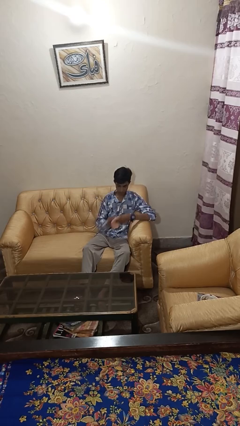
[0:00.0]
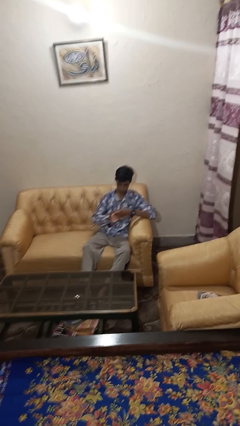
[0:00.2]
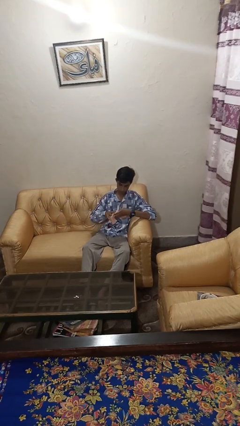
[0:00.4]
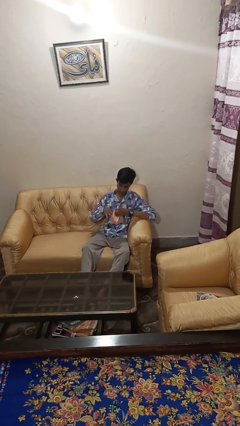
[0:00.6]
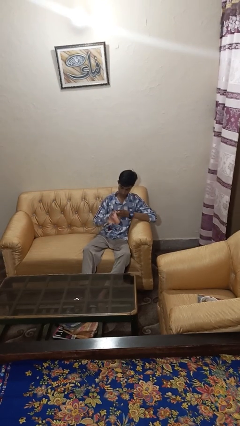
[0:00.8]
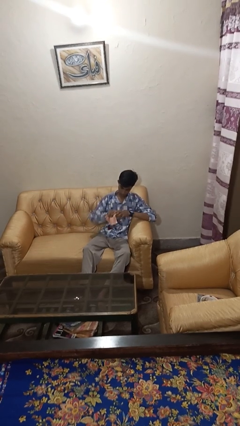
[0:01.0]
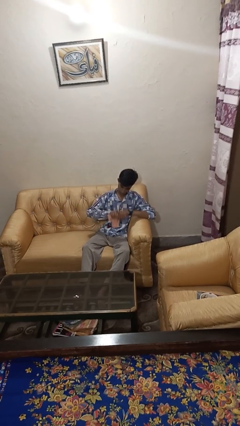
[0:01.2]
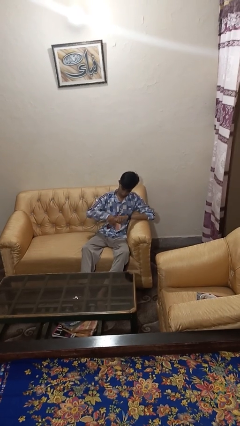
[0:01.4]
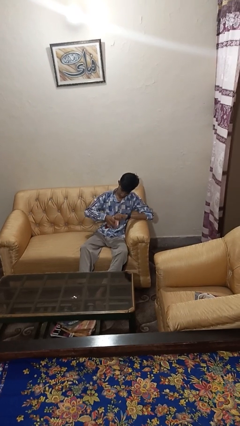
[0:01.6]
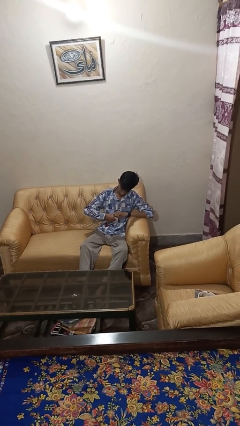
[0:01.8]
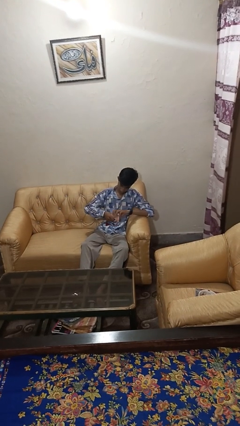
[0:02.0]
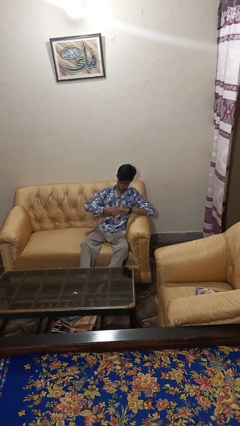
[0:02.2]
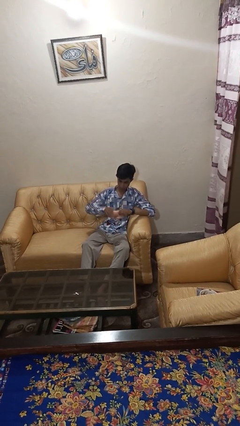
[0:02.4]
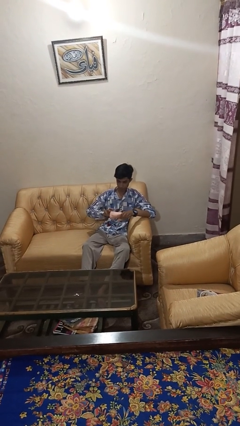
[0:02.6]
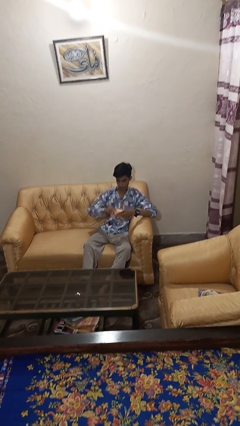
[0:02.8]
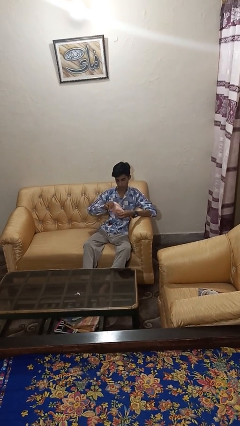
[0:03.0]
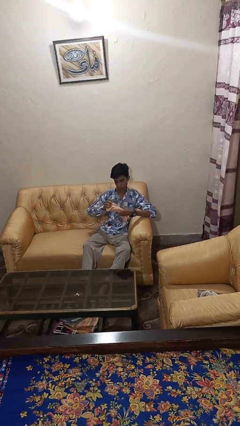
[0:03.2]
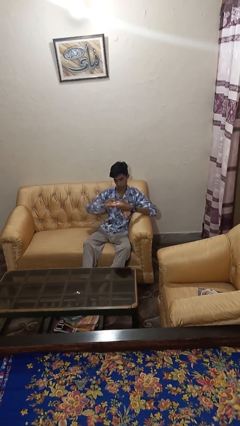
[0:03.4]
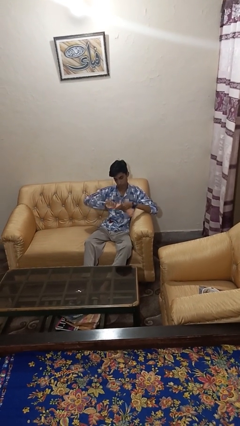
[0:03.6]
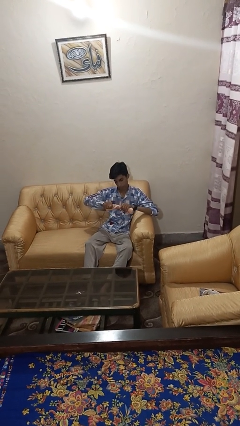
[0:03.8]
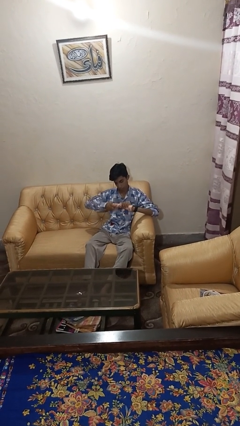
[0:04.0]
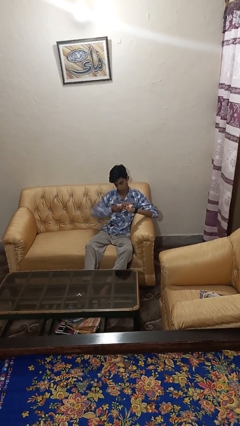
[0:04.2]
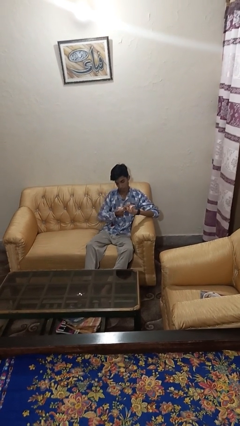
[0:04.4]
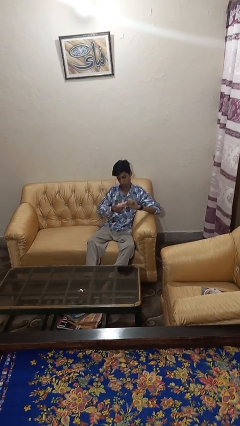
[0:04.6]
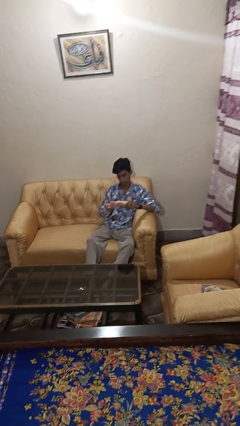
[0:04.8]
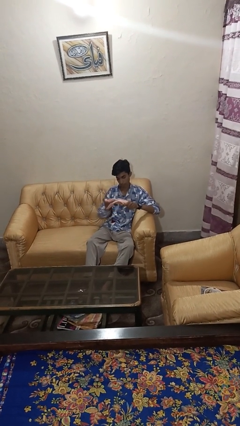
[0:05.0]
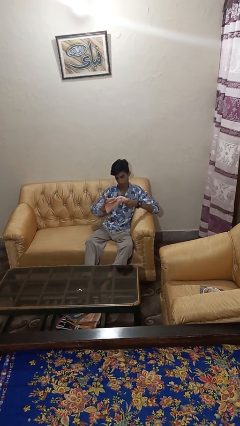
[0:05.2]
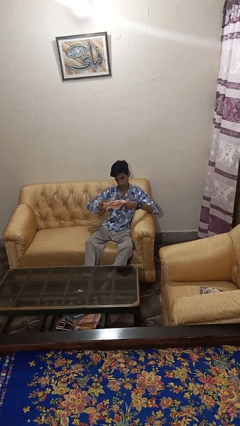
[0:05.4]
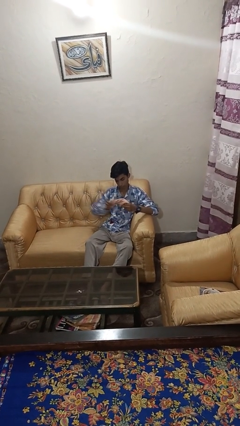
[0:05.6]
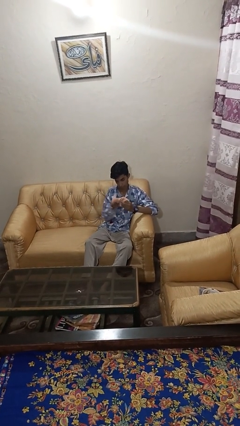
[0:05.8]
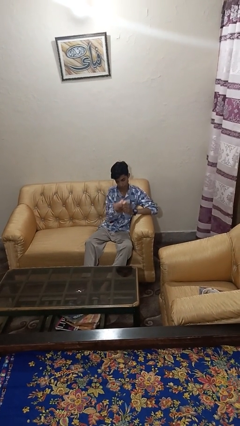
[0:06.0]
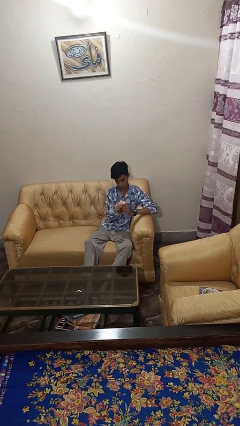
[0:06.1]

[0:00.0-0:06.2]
person squeezes object

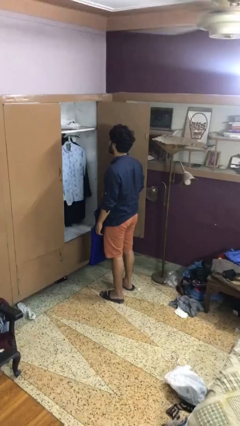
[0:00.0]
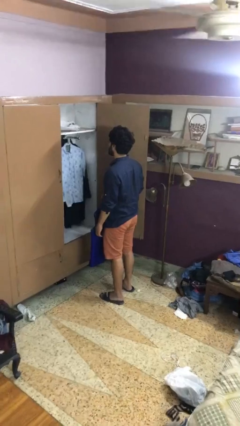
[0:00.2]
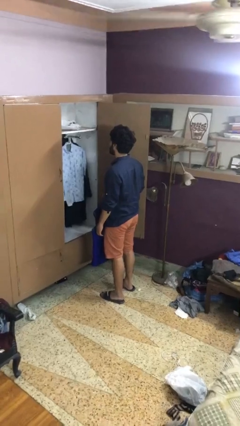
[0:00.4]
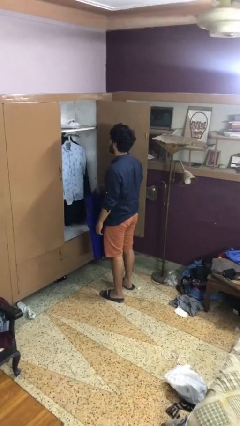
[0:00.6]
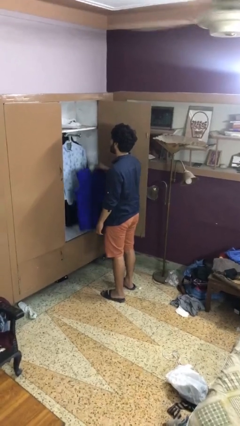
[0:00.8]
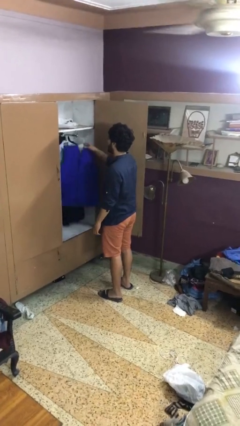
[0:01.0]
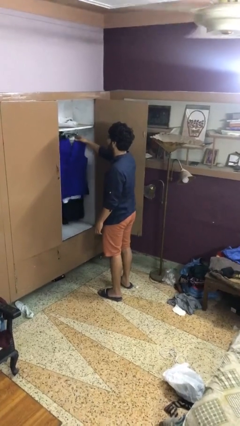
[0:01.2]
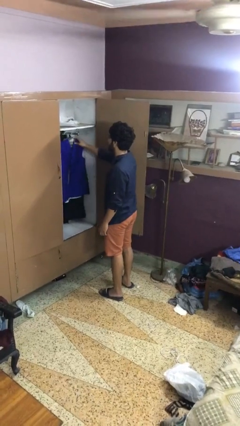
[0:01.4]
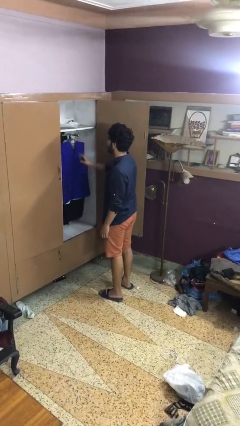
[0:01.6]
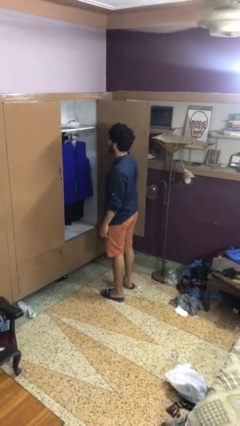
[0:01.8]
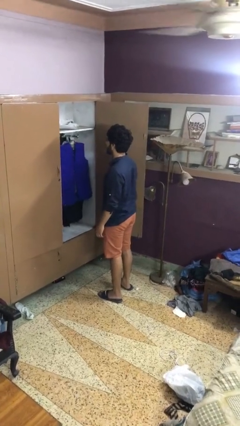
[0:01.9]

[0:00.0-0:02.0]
person puts clothes into closet

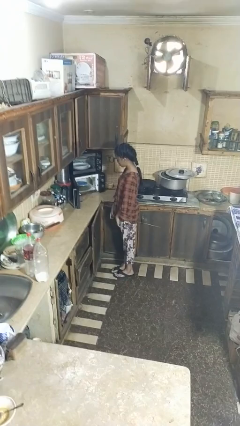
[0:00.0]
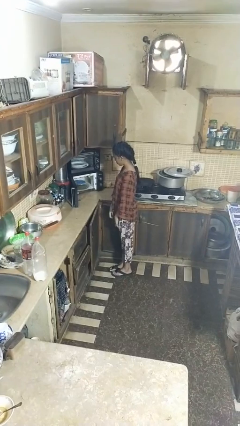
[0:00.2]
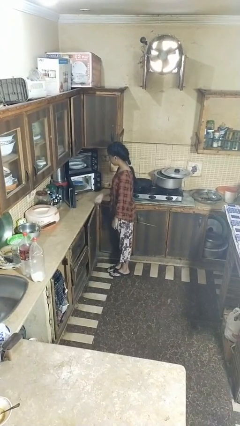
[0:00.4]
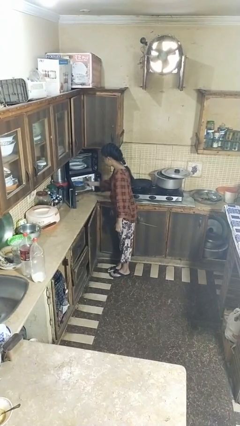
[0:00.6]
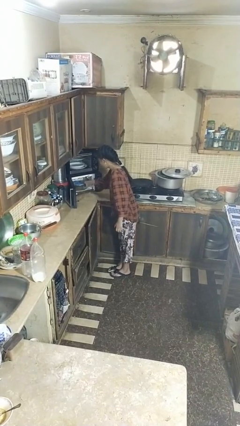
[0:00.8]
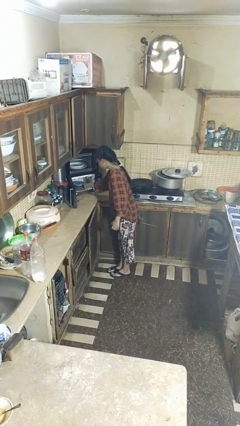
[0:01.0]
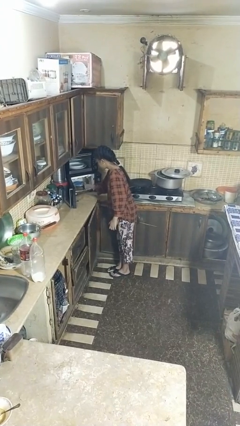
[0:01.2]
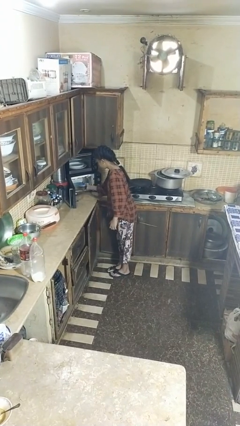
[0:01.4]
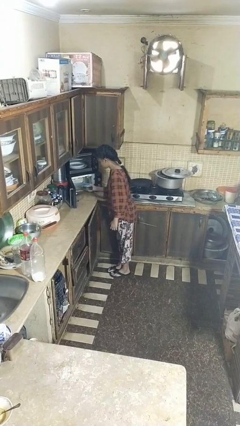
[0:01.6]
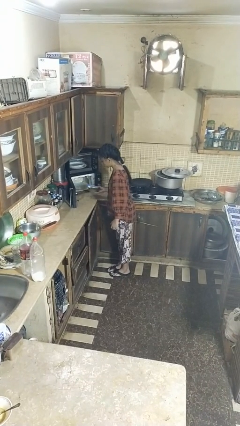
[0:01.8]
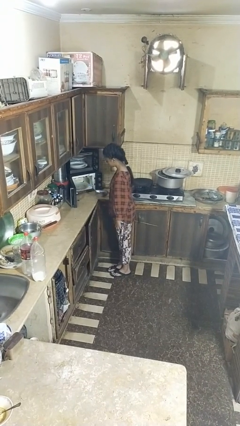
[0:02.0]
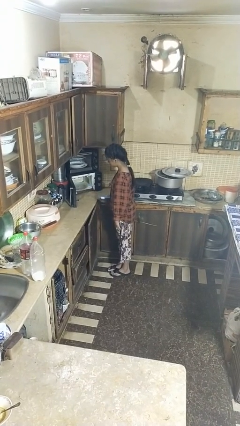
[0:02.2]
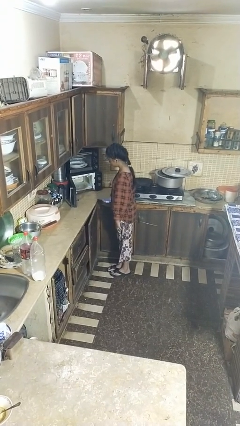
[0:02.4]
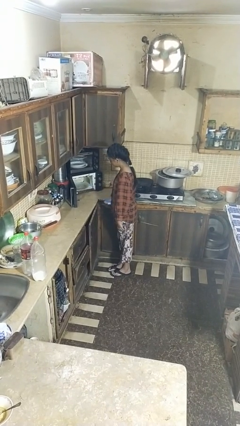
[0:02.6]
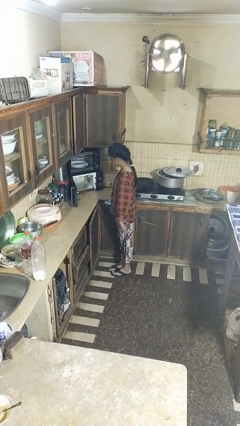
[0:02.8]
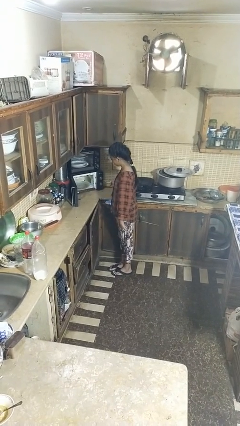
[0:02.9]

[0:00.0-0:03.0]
person takes object from microwave

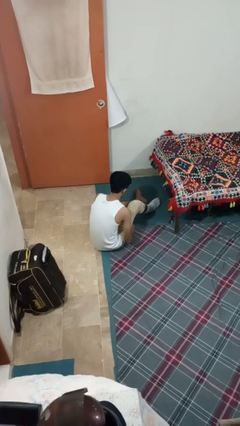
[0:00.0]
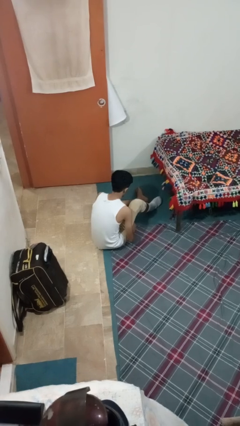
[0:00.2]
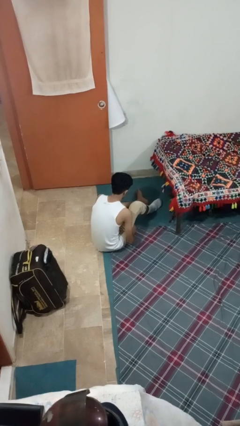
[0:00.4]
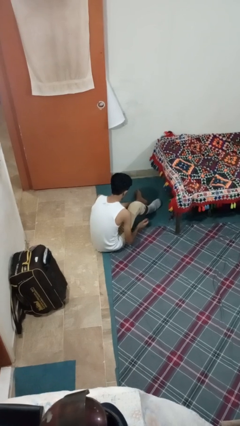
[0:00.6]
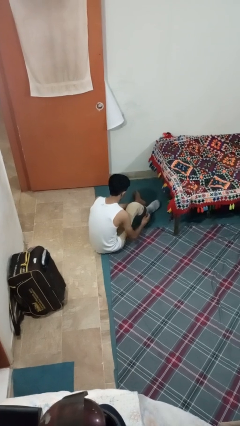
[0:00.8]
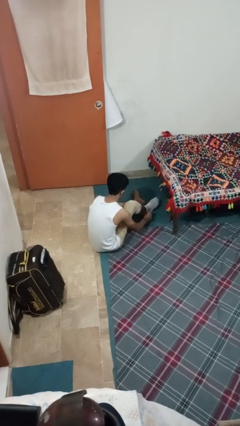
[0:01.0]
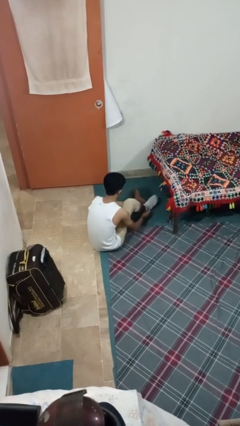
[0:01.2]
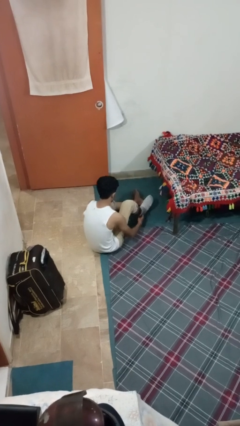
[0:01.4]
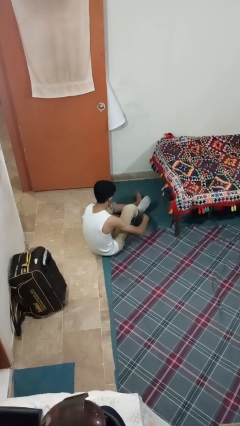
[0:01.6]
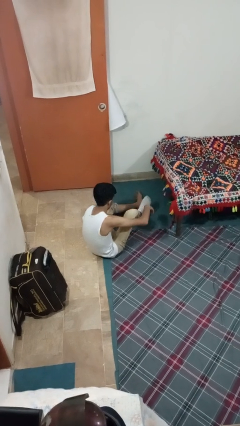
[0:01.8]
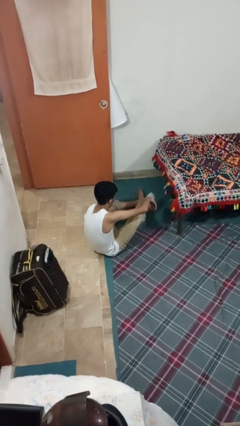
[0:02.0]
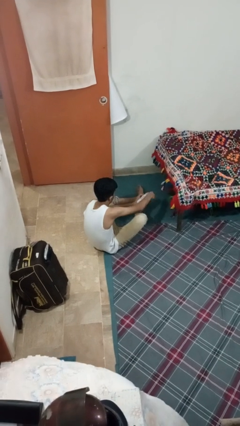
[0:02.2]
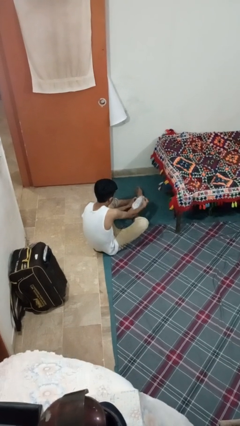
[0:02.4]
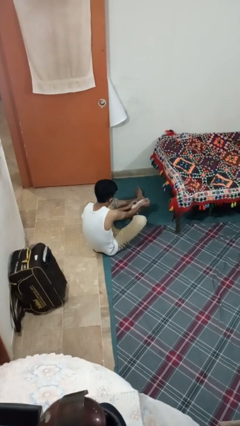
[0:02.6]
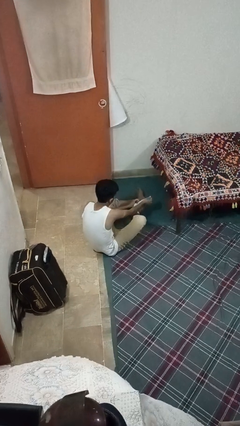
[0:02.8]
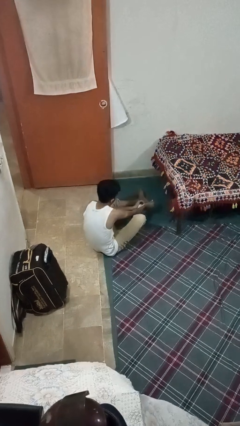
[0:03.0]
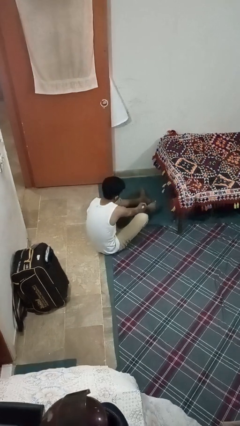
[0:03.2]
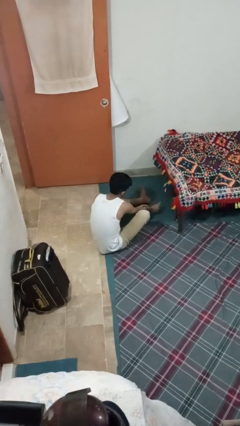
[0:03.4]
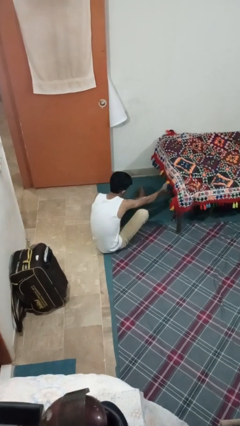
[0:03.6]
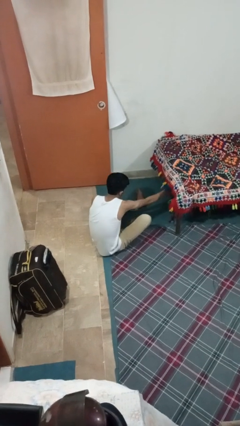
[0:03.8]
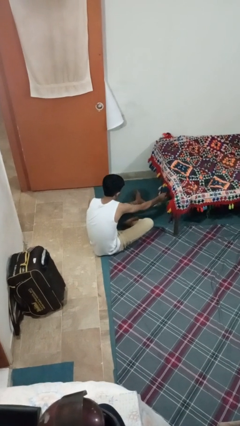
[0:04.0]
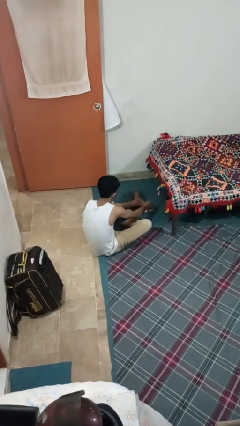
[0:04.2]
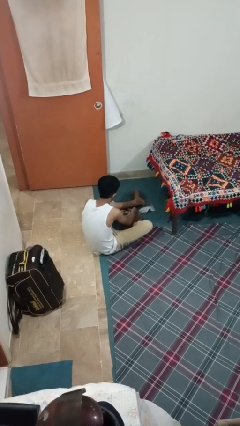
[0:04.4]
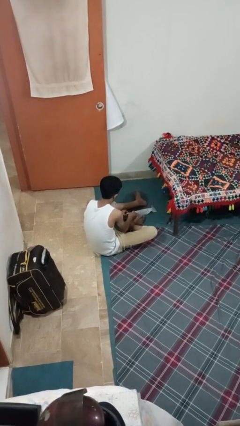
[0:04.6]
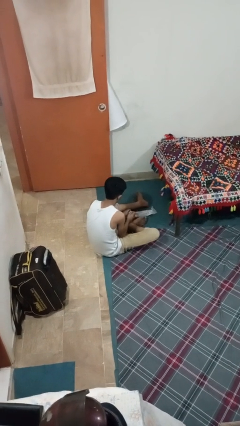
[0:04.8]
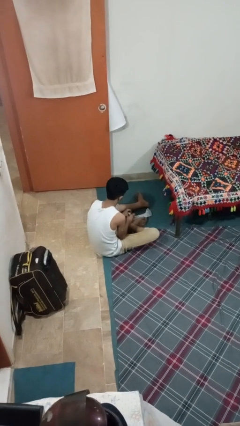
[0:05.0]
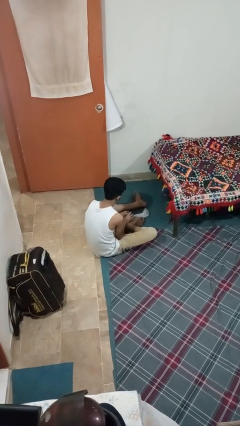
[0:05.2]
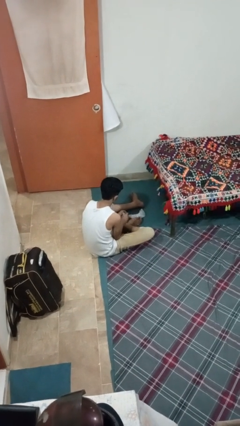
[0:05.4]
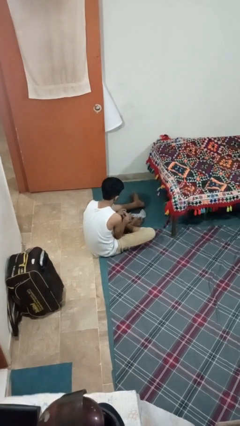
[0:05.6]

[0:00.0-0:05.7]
person takes off socks

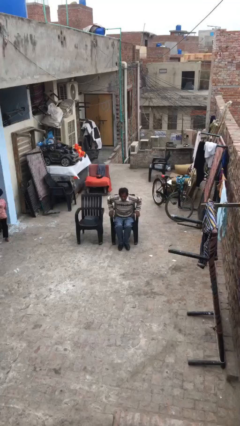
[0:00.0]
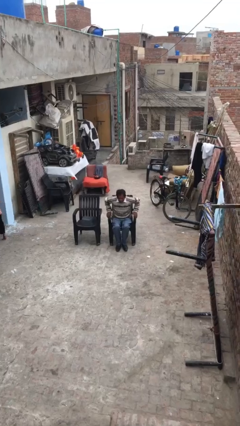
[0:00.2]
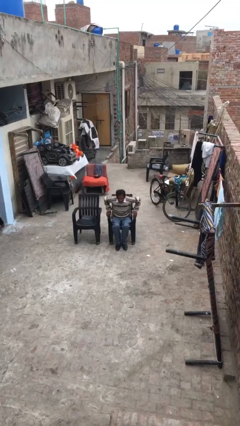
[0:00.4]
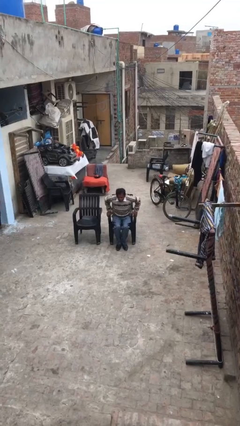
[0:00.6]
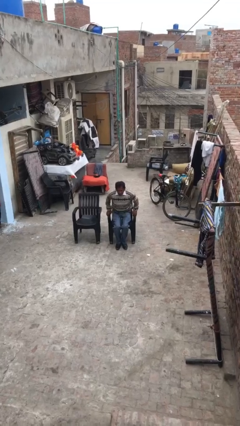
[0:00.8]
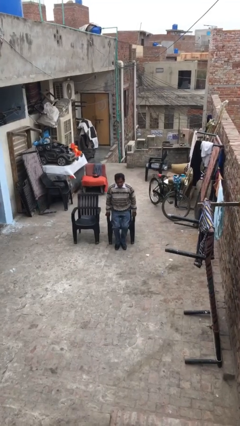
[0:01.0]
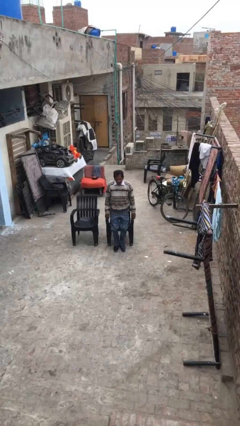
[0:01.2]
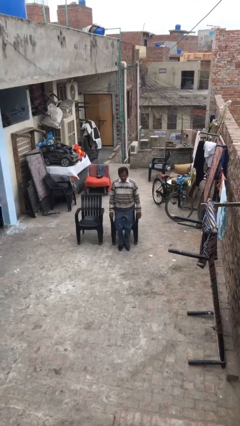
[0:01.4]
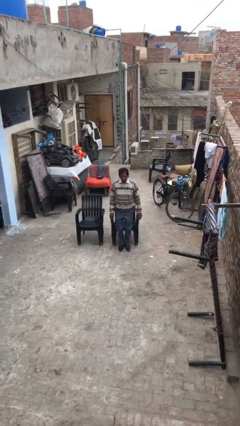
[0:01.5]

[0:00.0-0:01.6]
person stands up
